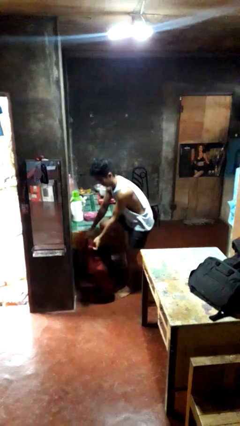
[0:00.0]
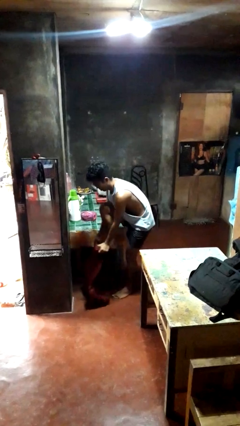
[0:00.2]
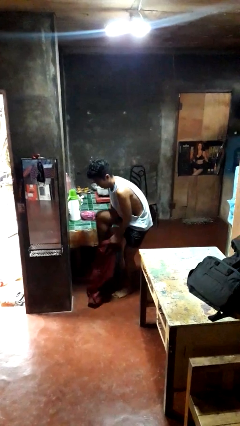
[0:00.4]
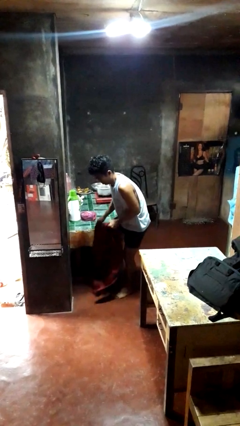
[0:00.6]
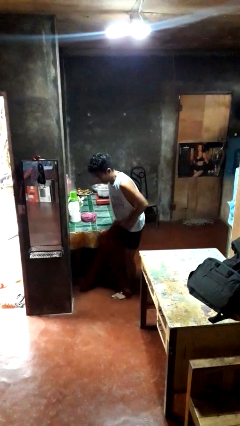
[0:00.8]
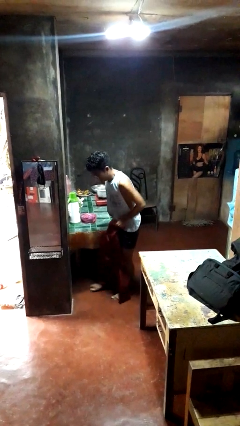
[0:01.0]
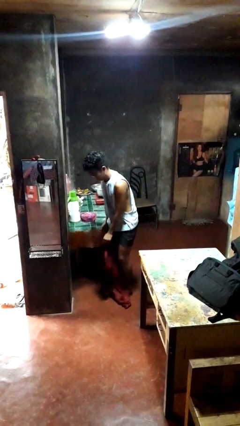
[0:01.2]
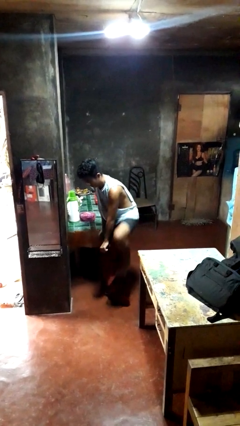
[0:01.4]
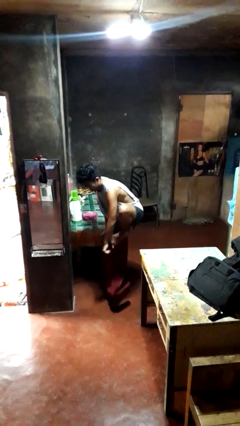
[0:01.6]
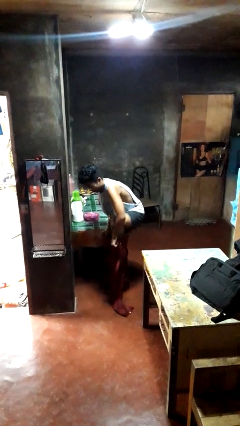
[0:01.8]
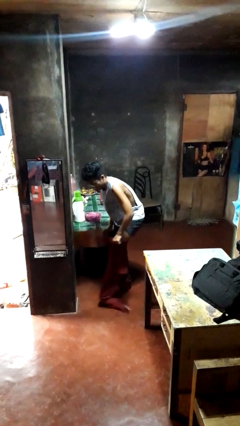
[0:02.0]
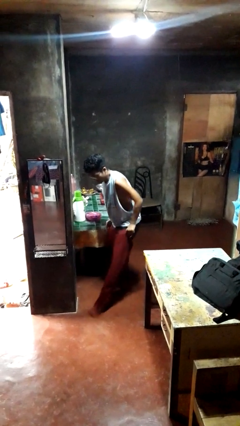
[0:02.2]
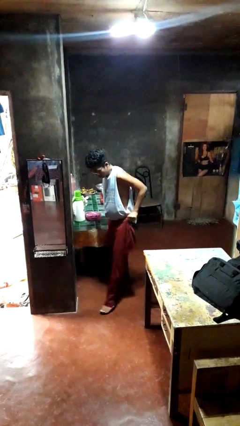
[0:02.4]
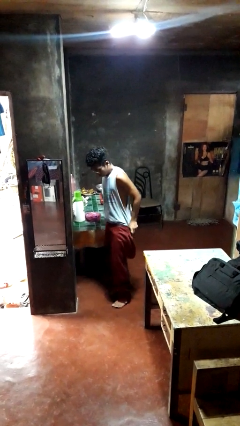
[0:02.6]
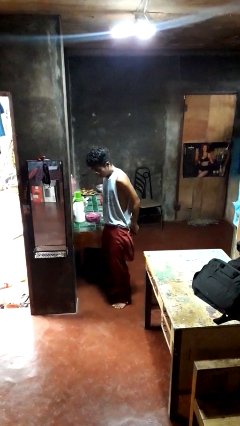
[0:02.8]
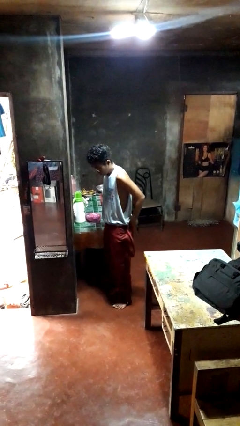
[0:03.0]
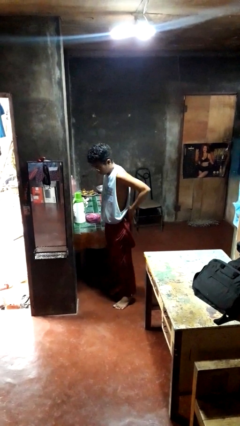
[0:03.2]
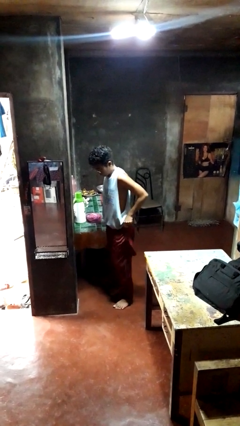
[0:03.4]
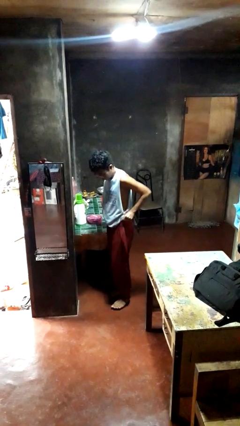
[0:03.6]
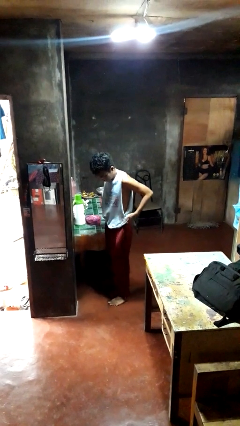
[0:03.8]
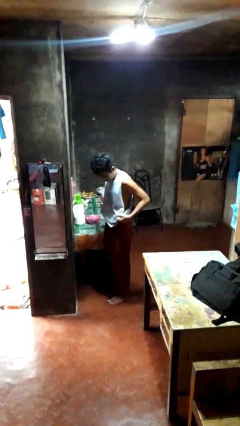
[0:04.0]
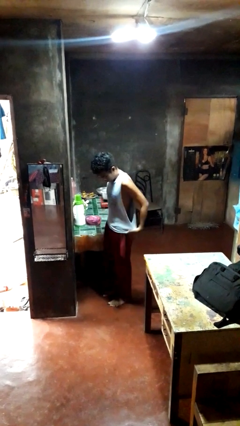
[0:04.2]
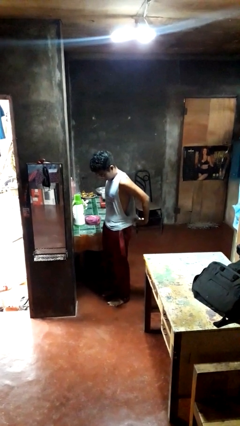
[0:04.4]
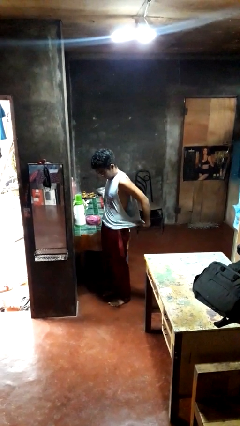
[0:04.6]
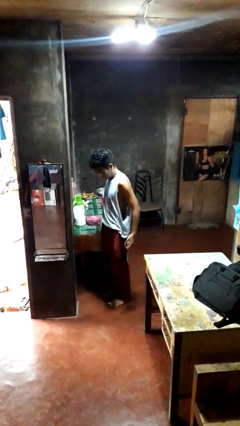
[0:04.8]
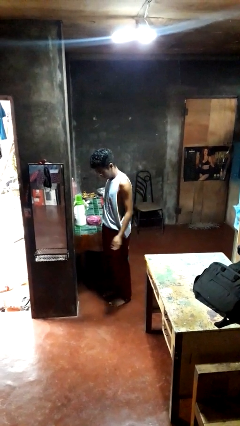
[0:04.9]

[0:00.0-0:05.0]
person puts on pants

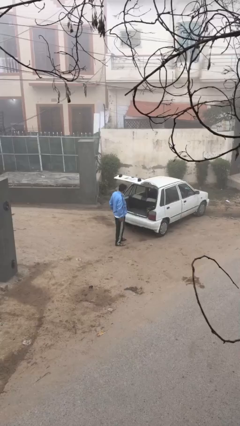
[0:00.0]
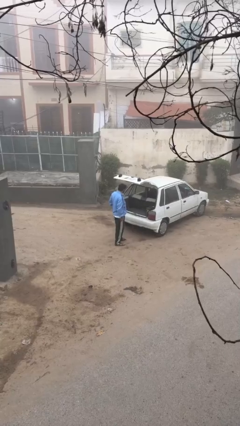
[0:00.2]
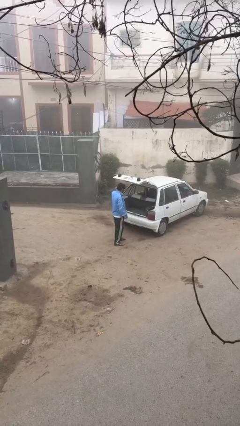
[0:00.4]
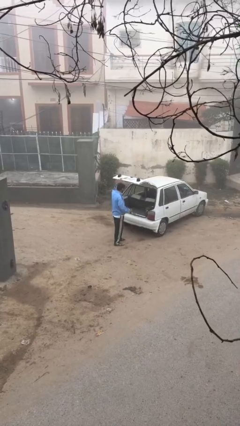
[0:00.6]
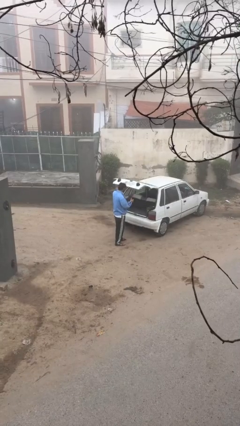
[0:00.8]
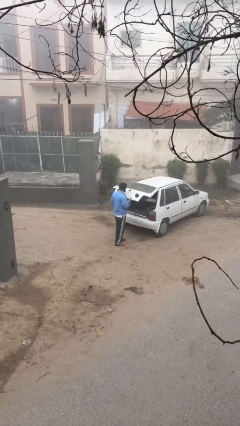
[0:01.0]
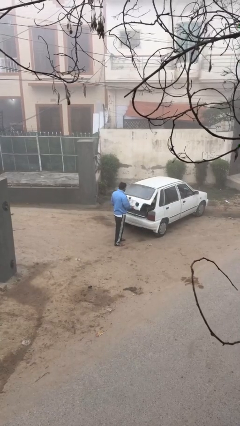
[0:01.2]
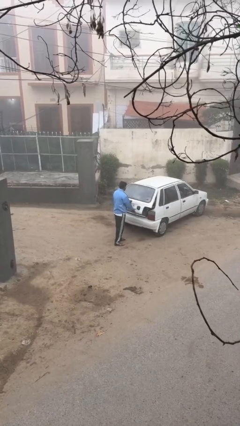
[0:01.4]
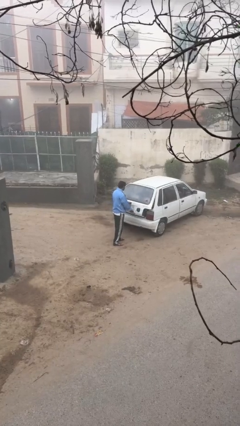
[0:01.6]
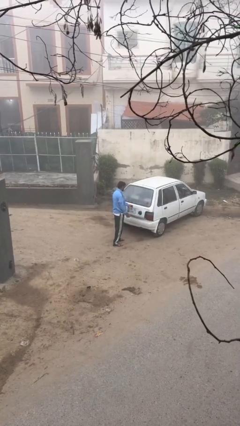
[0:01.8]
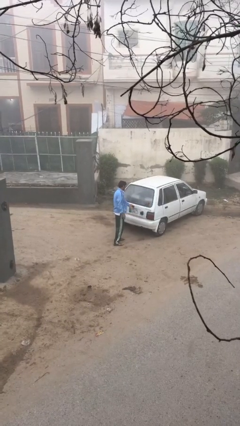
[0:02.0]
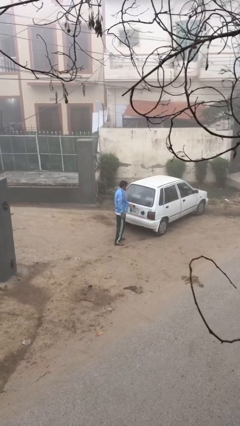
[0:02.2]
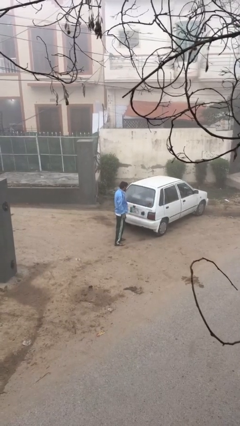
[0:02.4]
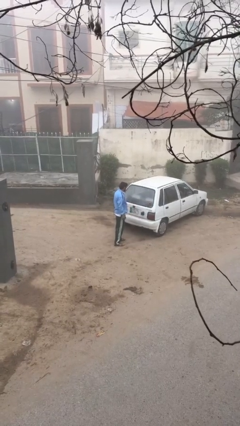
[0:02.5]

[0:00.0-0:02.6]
person closes car trunk

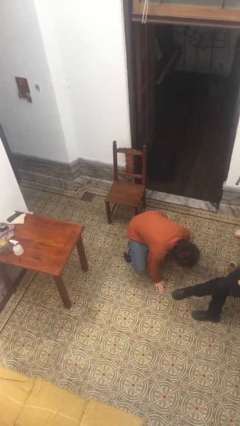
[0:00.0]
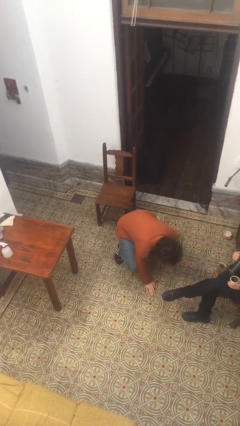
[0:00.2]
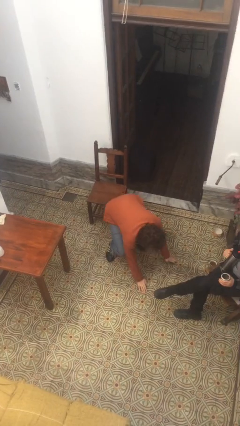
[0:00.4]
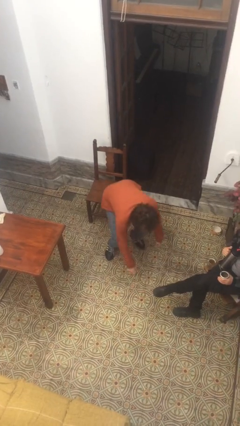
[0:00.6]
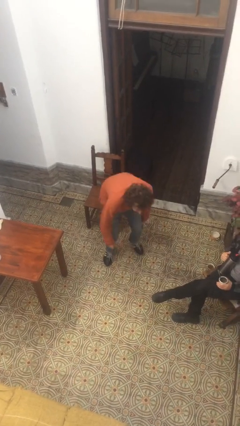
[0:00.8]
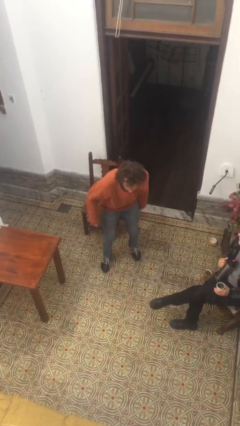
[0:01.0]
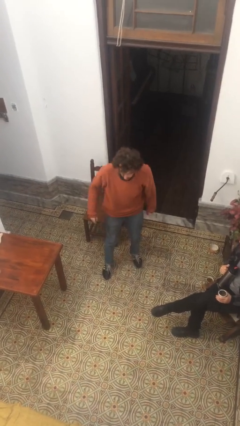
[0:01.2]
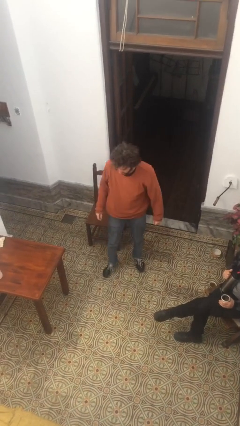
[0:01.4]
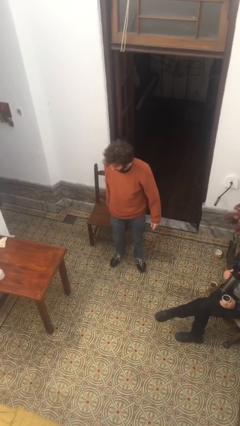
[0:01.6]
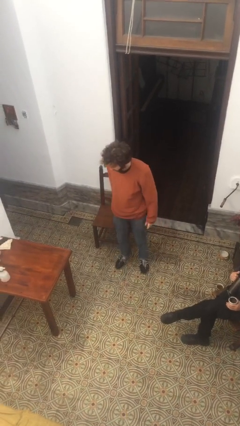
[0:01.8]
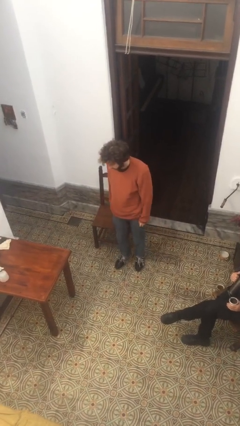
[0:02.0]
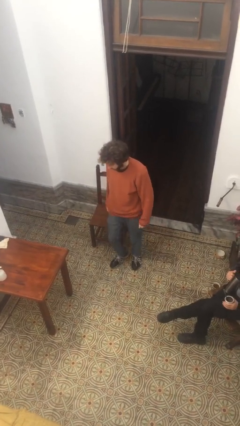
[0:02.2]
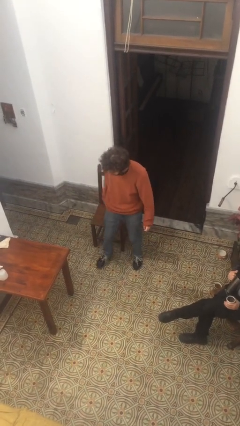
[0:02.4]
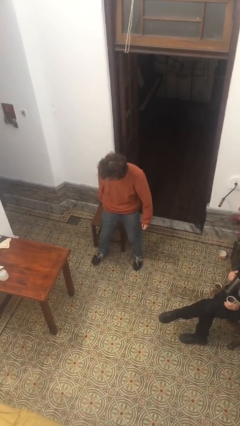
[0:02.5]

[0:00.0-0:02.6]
person stands up from floor

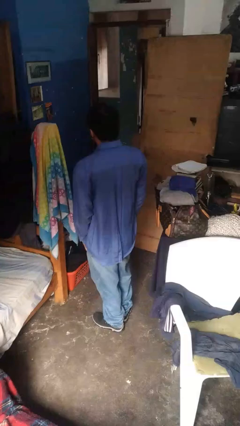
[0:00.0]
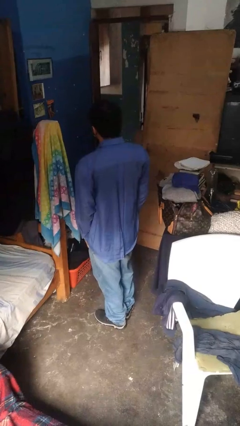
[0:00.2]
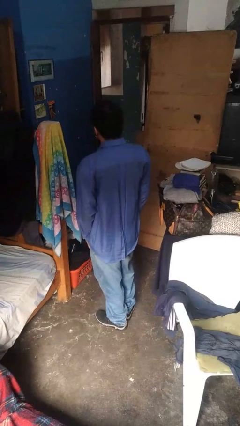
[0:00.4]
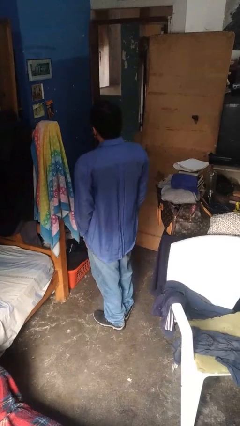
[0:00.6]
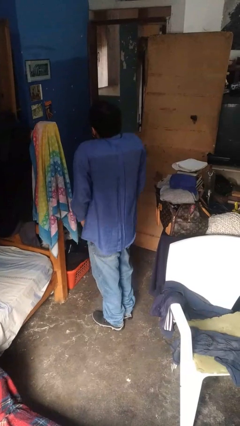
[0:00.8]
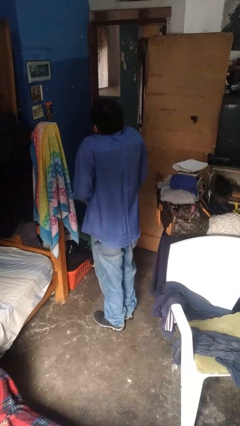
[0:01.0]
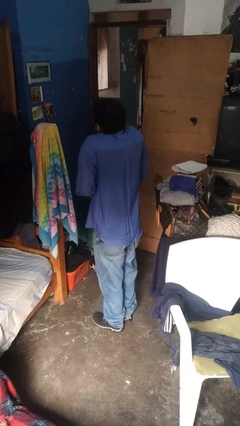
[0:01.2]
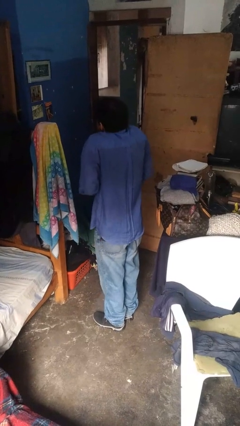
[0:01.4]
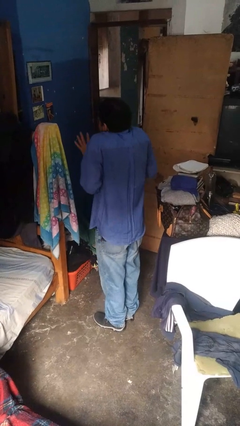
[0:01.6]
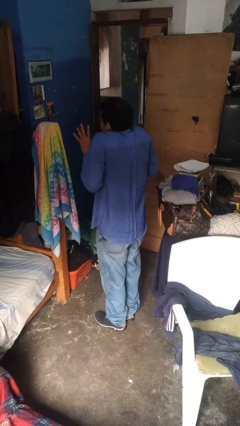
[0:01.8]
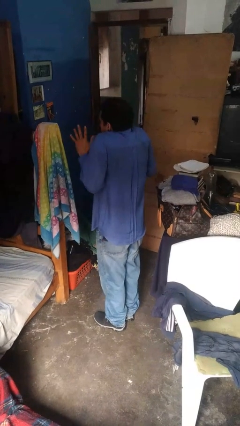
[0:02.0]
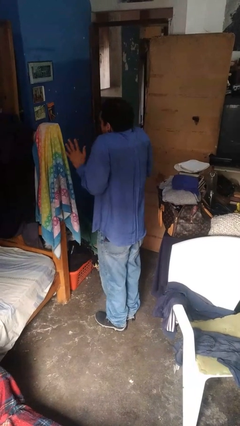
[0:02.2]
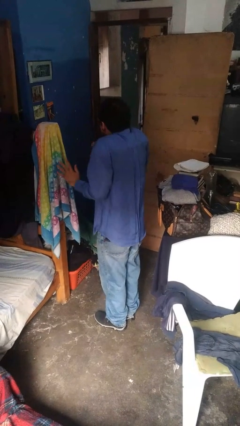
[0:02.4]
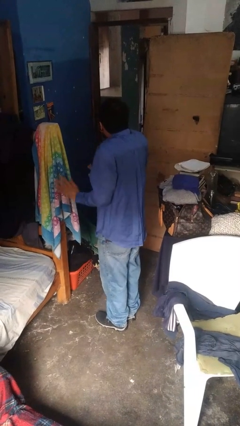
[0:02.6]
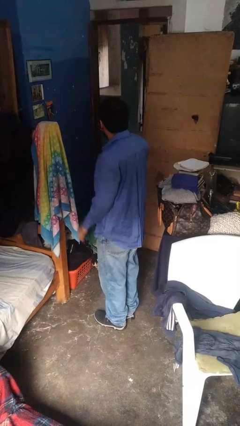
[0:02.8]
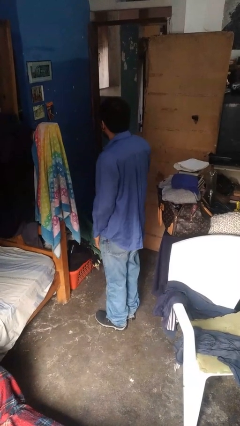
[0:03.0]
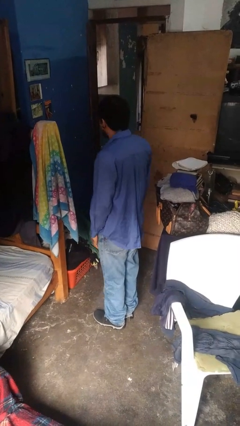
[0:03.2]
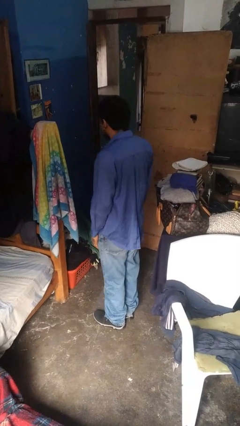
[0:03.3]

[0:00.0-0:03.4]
person shrugs

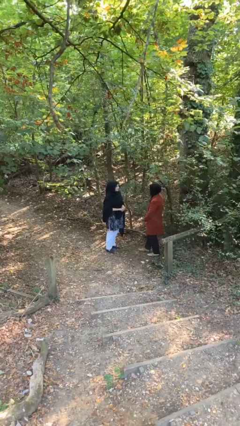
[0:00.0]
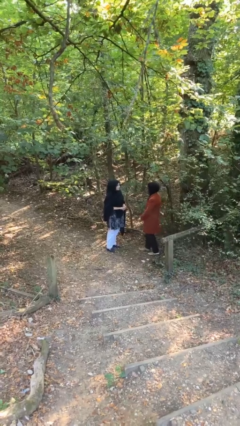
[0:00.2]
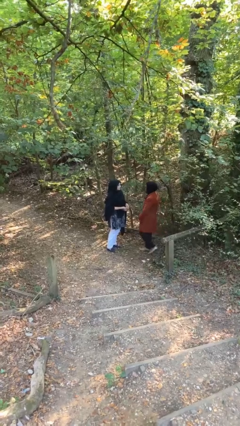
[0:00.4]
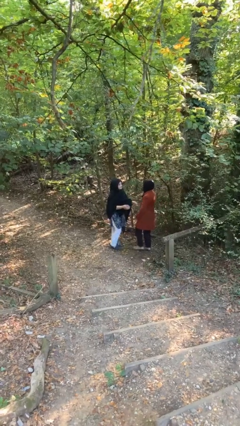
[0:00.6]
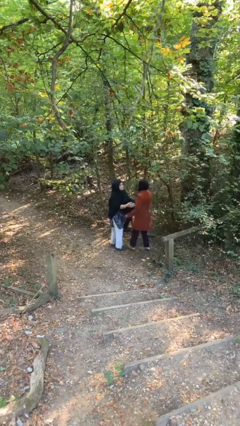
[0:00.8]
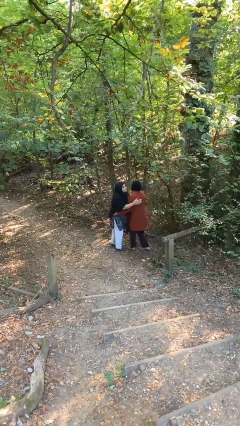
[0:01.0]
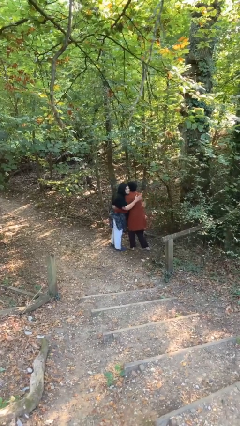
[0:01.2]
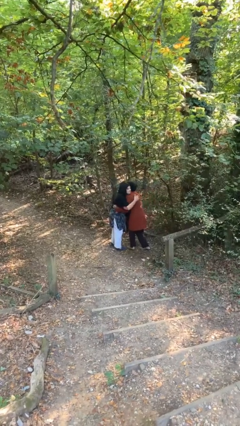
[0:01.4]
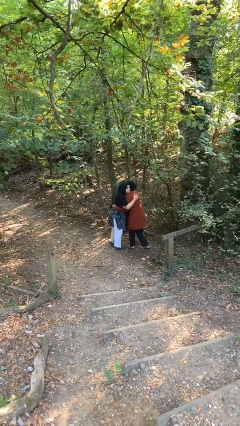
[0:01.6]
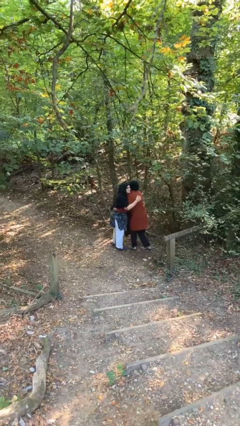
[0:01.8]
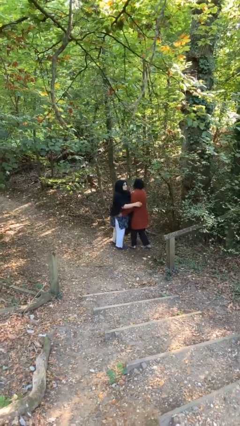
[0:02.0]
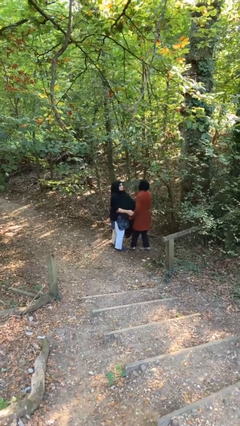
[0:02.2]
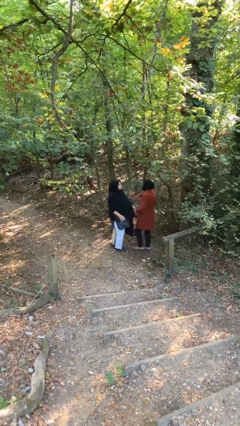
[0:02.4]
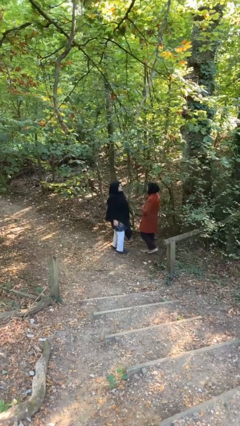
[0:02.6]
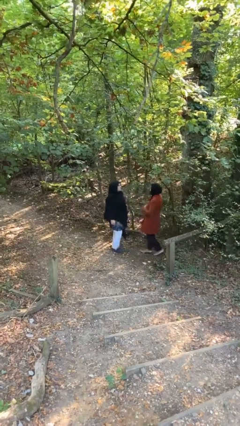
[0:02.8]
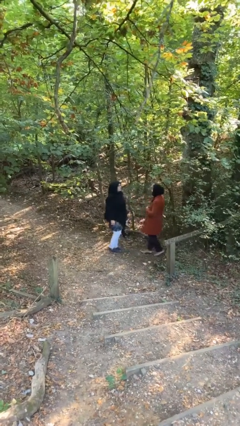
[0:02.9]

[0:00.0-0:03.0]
person embraces person

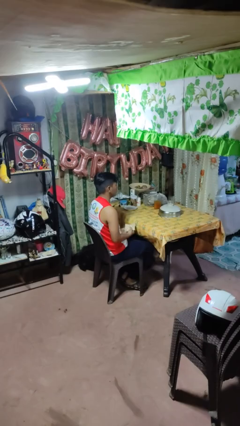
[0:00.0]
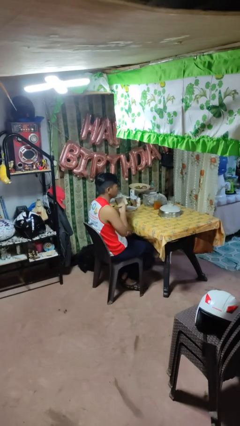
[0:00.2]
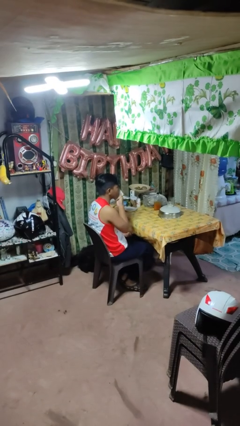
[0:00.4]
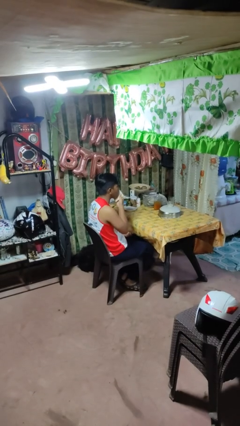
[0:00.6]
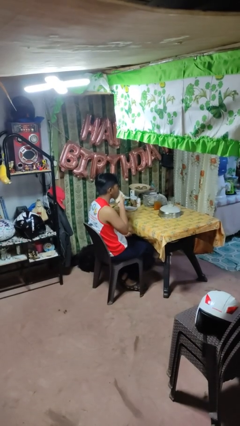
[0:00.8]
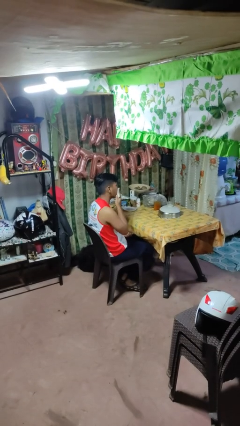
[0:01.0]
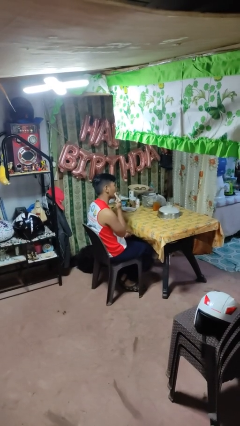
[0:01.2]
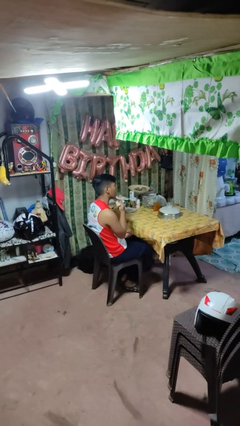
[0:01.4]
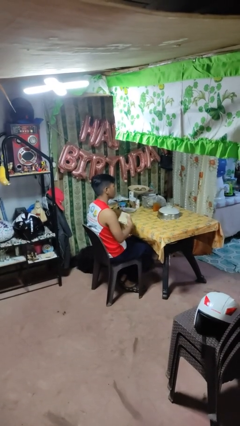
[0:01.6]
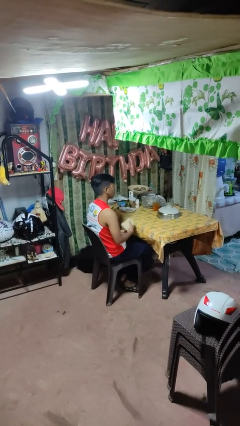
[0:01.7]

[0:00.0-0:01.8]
person wipes mouth with napkin
